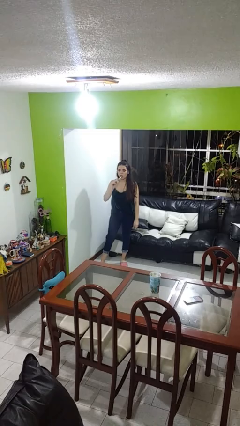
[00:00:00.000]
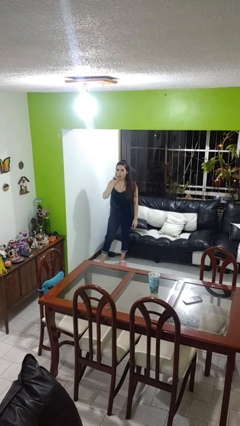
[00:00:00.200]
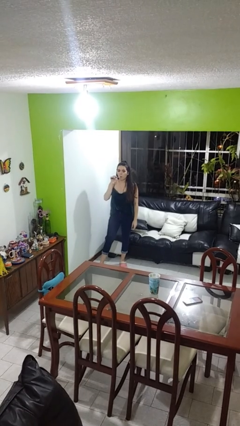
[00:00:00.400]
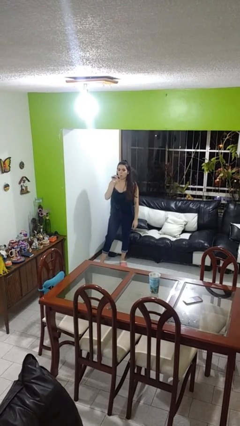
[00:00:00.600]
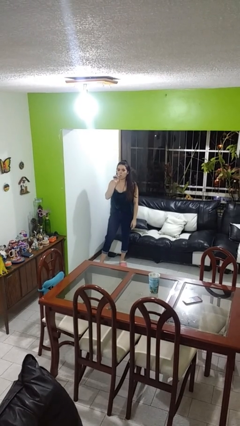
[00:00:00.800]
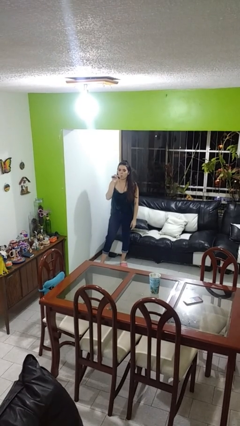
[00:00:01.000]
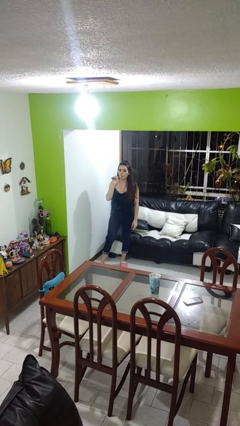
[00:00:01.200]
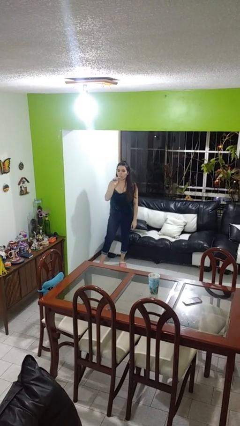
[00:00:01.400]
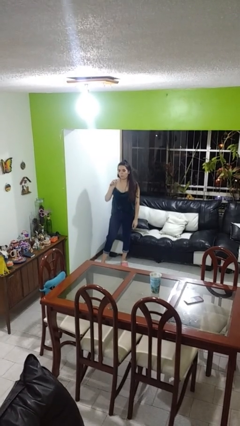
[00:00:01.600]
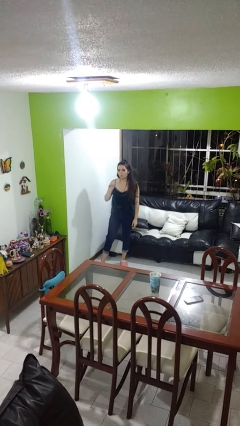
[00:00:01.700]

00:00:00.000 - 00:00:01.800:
person brushes teeth

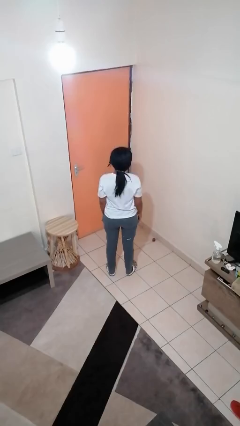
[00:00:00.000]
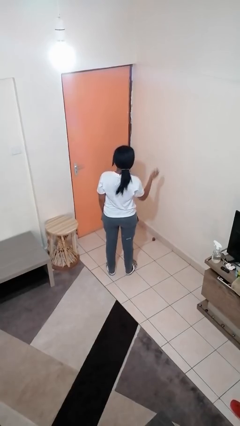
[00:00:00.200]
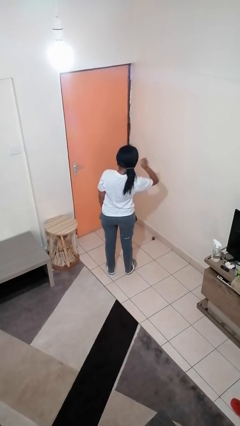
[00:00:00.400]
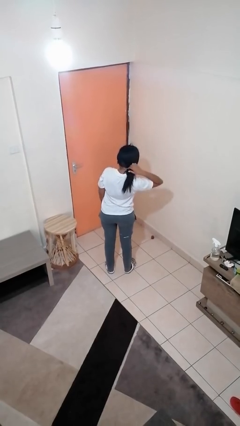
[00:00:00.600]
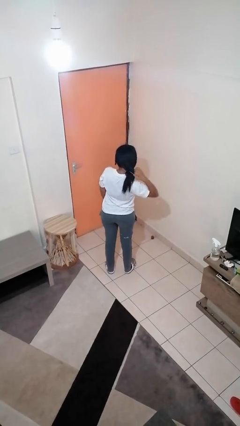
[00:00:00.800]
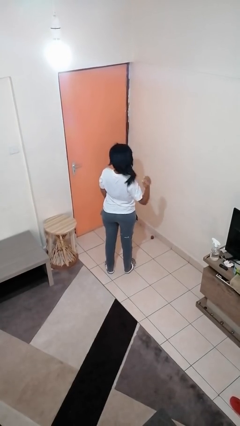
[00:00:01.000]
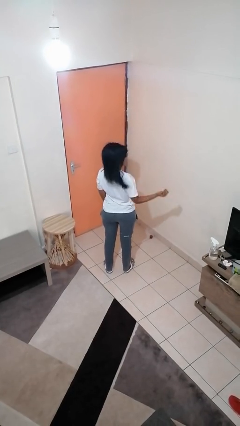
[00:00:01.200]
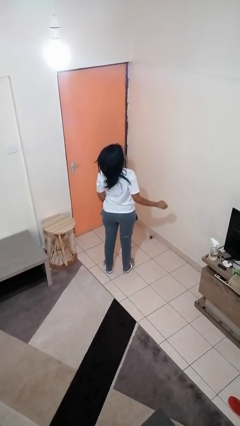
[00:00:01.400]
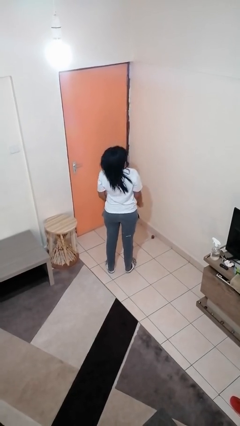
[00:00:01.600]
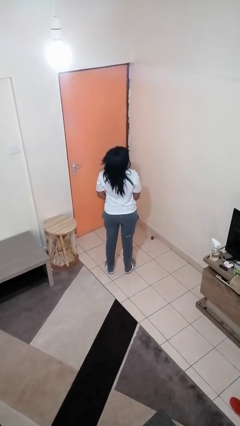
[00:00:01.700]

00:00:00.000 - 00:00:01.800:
person takes off hairtie

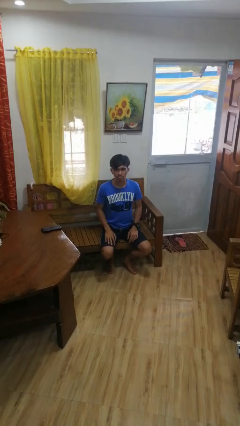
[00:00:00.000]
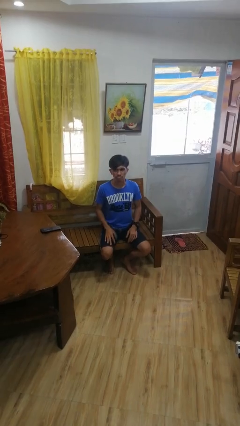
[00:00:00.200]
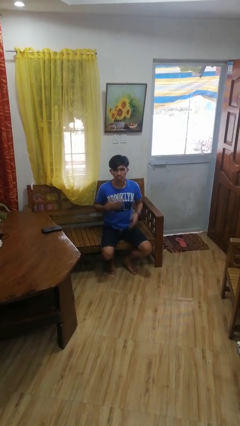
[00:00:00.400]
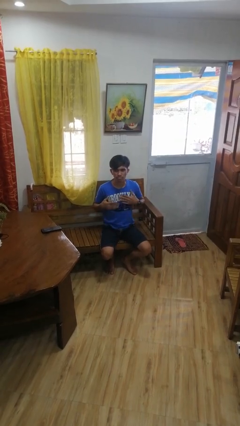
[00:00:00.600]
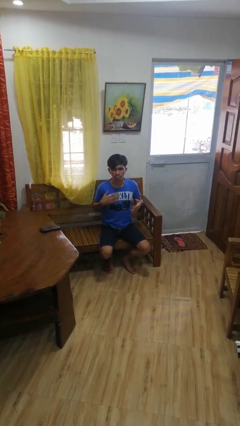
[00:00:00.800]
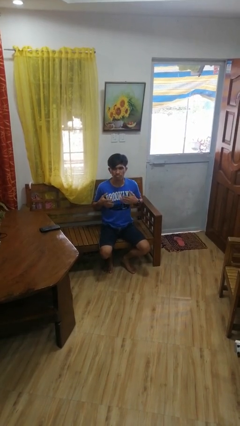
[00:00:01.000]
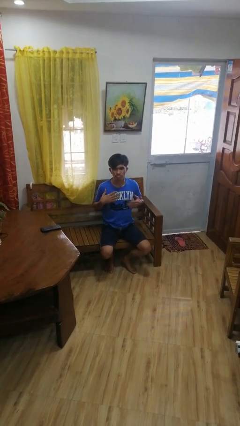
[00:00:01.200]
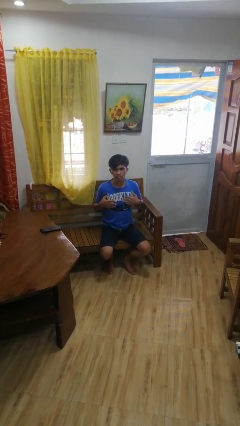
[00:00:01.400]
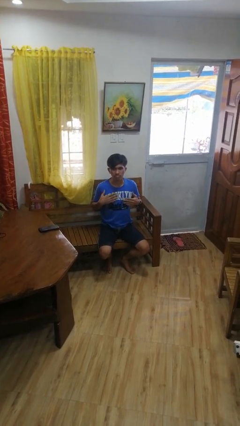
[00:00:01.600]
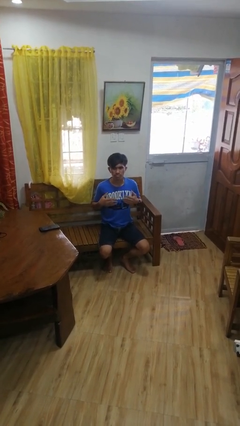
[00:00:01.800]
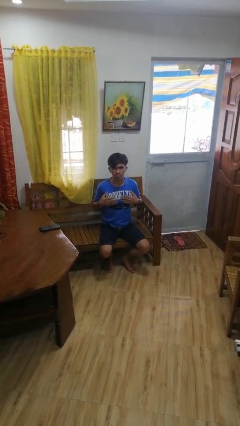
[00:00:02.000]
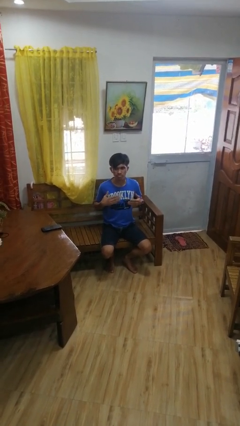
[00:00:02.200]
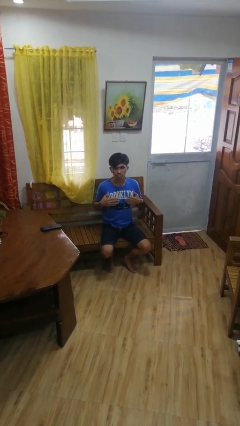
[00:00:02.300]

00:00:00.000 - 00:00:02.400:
person drums on chest

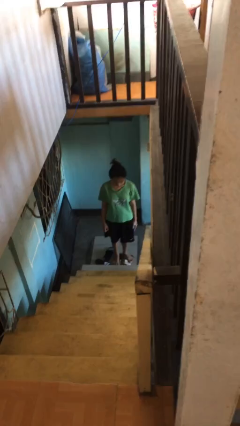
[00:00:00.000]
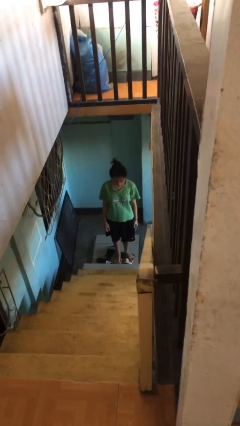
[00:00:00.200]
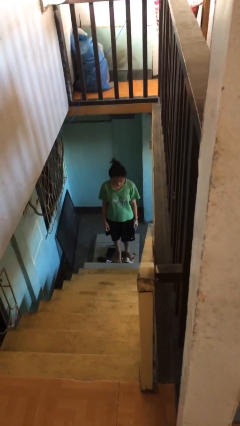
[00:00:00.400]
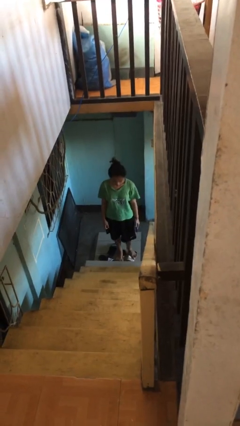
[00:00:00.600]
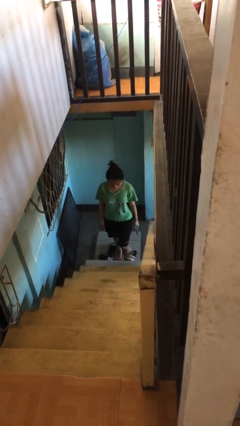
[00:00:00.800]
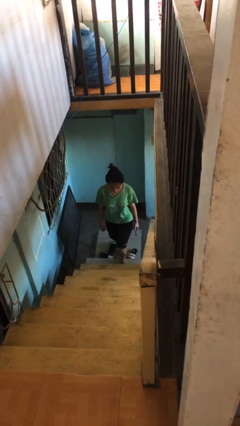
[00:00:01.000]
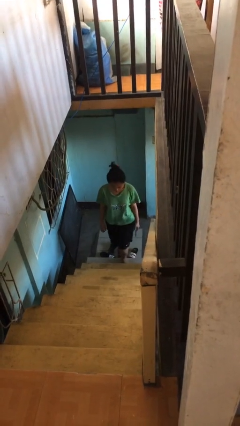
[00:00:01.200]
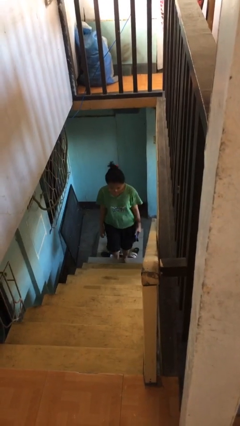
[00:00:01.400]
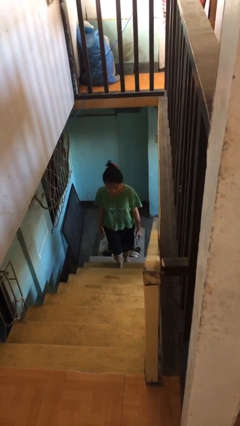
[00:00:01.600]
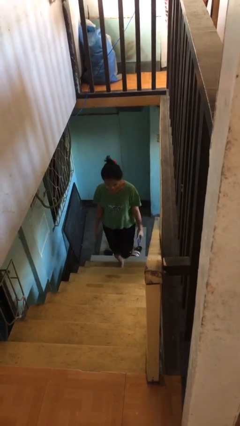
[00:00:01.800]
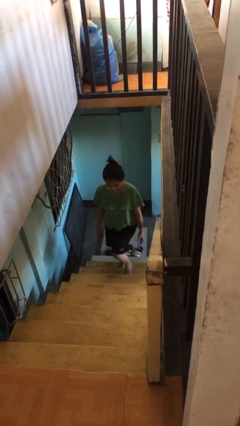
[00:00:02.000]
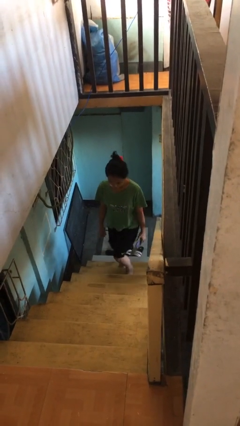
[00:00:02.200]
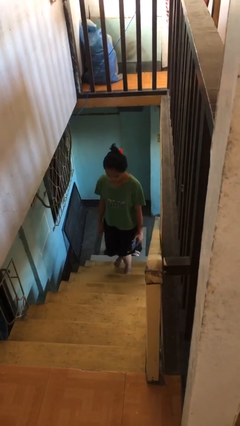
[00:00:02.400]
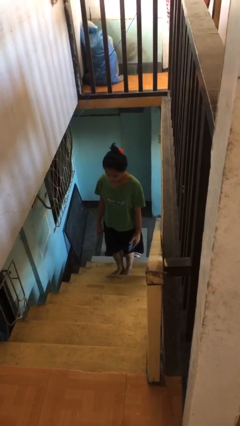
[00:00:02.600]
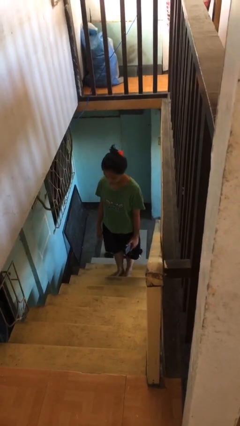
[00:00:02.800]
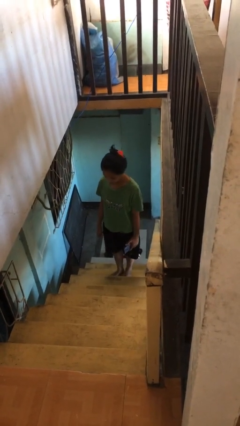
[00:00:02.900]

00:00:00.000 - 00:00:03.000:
person climbs up stairs

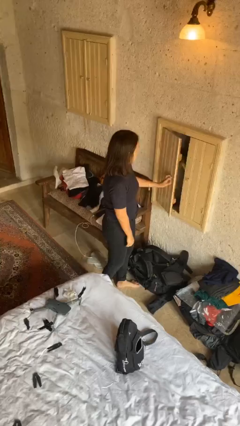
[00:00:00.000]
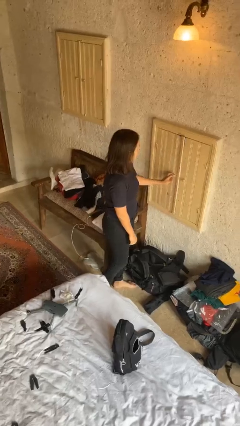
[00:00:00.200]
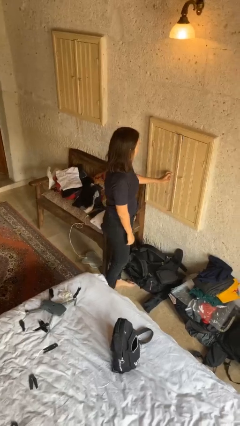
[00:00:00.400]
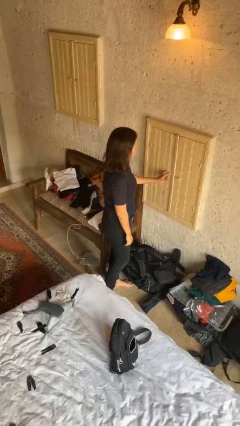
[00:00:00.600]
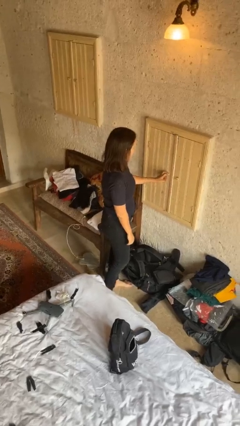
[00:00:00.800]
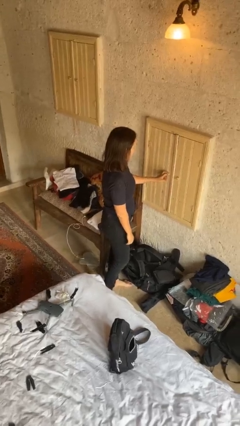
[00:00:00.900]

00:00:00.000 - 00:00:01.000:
person closes closet door

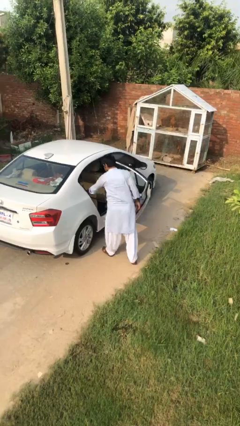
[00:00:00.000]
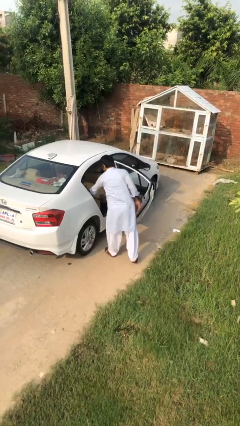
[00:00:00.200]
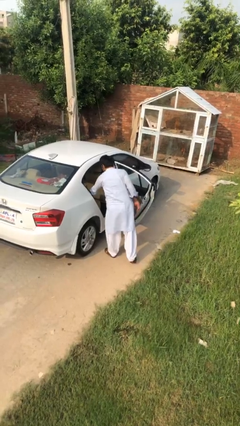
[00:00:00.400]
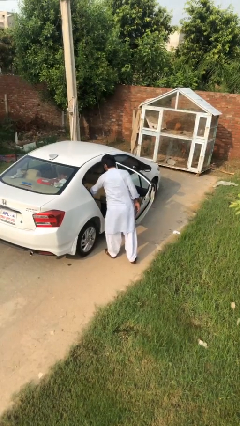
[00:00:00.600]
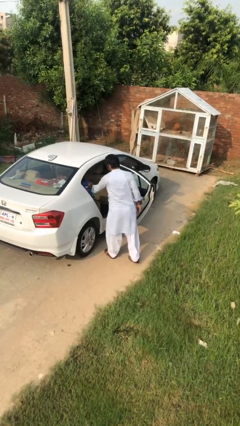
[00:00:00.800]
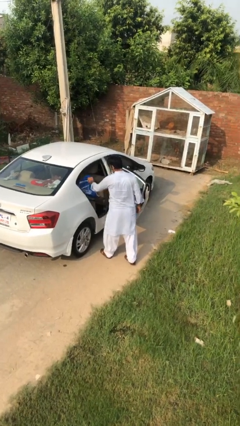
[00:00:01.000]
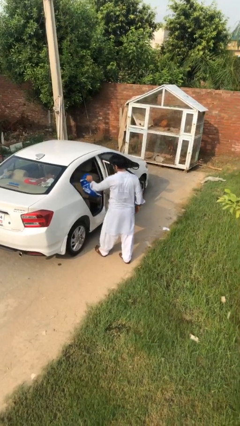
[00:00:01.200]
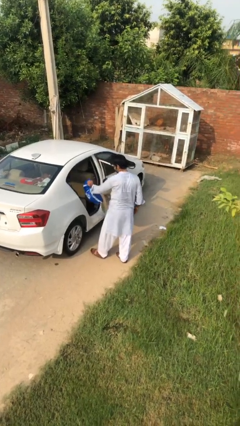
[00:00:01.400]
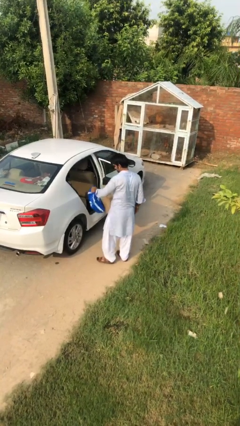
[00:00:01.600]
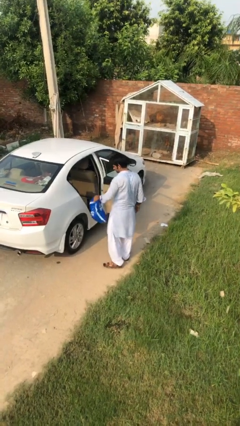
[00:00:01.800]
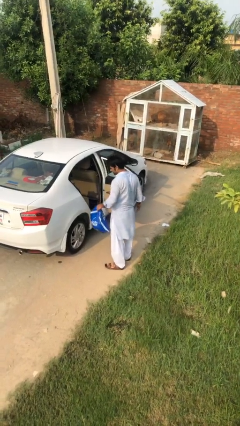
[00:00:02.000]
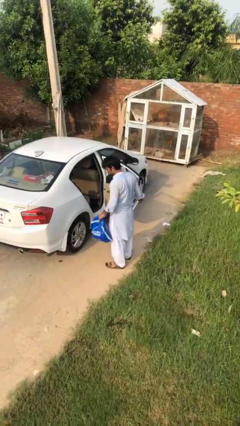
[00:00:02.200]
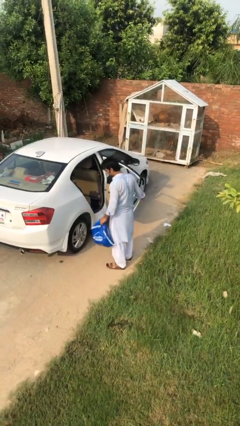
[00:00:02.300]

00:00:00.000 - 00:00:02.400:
person unloads car

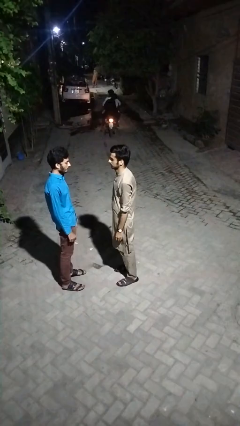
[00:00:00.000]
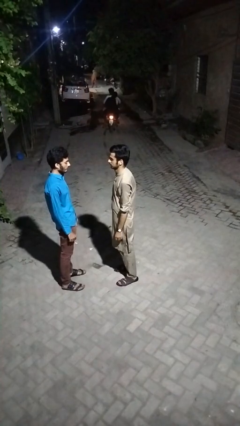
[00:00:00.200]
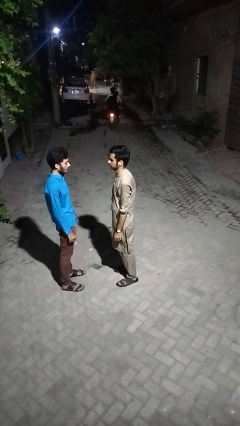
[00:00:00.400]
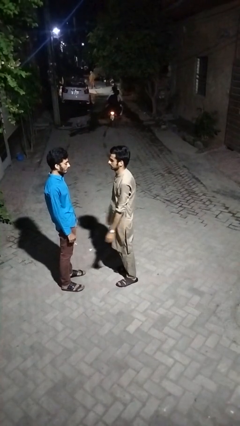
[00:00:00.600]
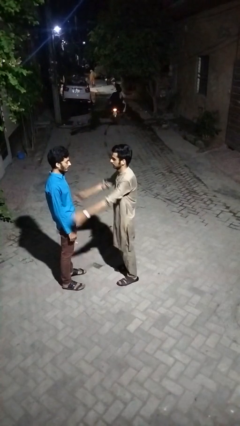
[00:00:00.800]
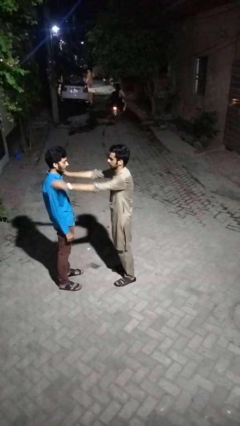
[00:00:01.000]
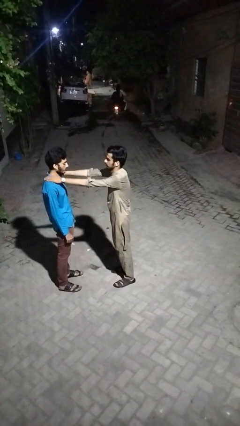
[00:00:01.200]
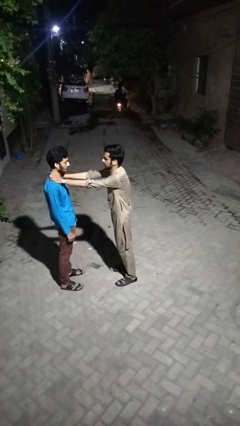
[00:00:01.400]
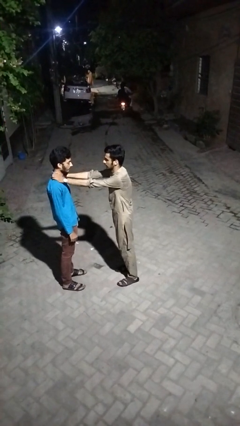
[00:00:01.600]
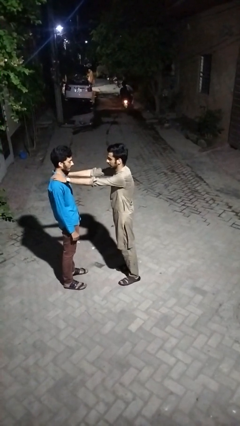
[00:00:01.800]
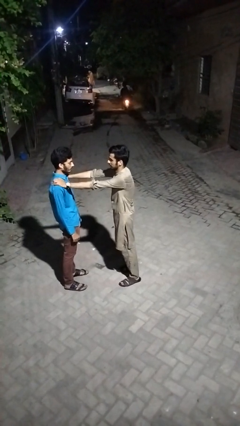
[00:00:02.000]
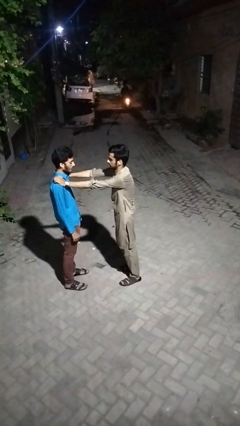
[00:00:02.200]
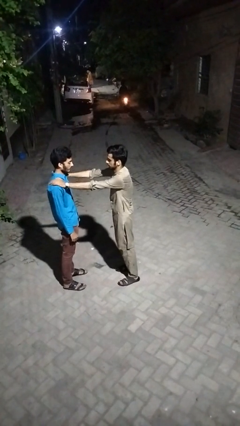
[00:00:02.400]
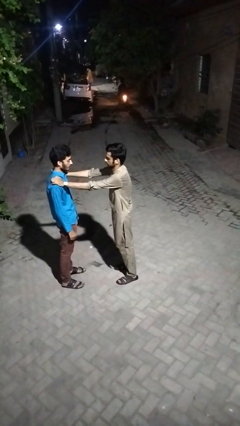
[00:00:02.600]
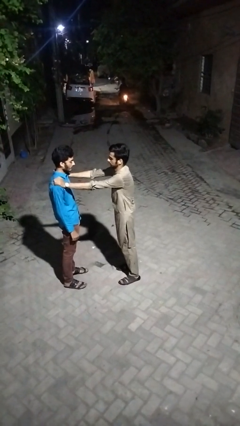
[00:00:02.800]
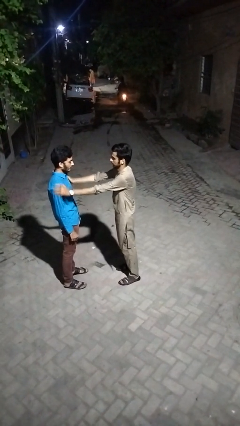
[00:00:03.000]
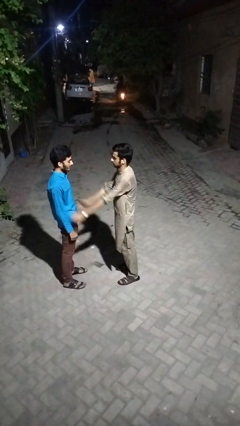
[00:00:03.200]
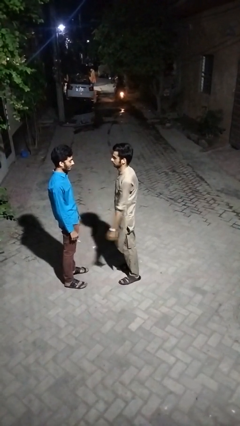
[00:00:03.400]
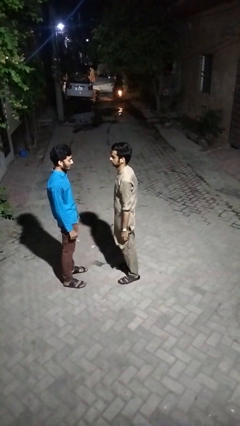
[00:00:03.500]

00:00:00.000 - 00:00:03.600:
person pounds shoulders of person

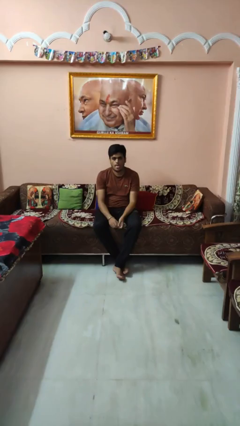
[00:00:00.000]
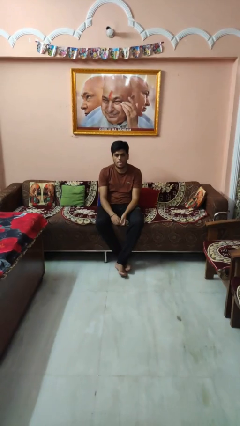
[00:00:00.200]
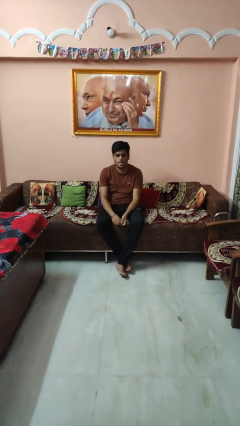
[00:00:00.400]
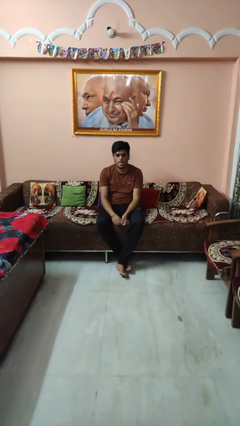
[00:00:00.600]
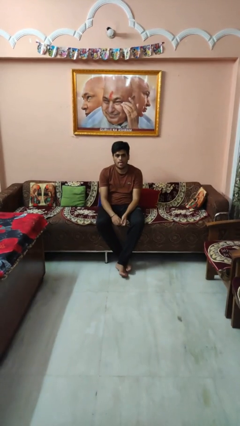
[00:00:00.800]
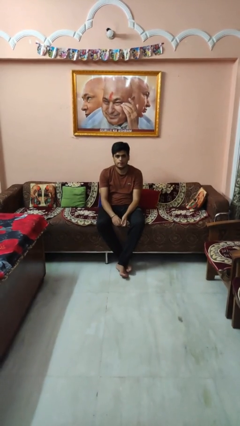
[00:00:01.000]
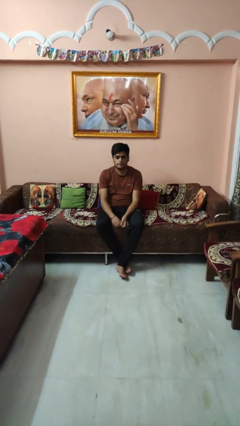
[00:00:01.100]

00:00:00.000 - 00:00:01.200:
person sticks out tongue
